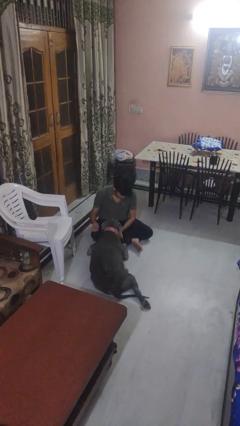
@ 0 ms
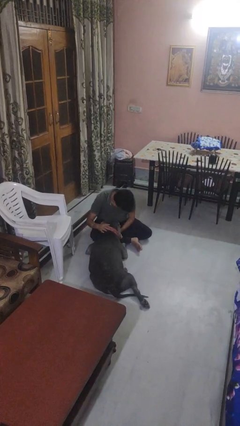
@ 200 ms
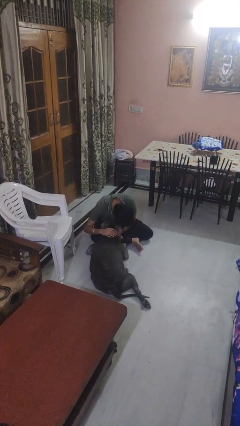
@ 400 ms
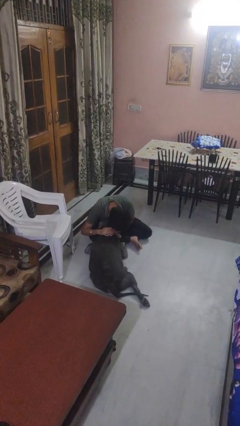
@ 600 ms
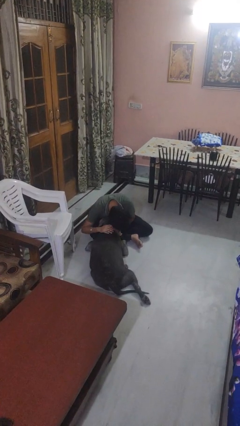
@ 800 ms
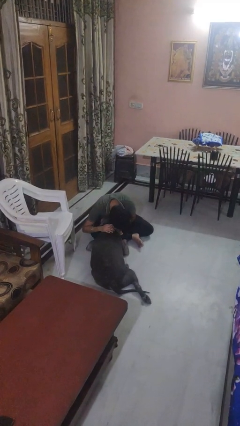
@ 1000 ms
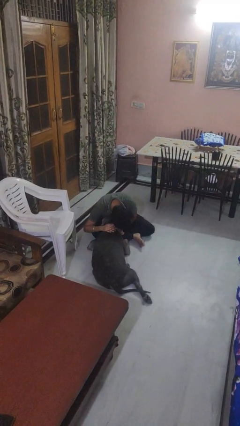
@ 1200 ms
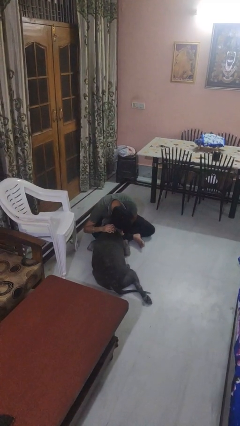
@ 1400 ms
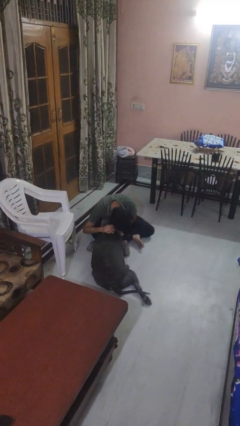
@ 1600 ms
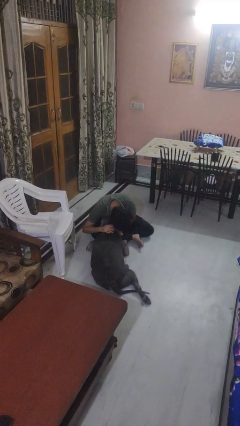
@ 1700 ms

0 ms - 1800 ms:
person hugs dog

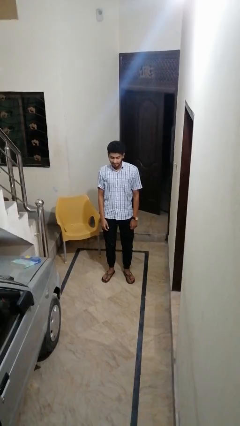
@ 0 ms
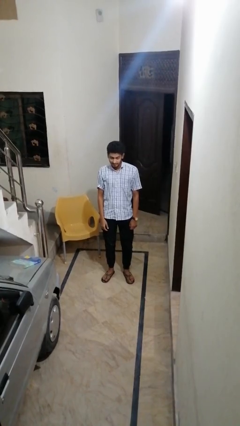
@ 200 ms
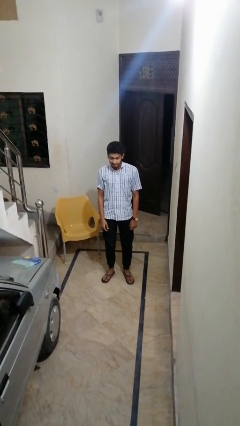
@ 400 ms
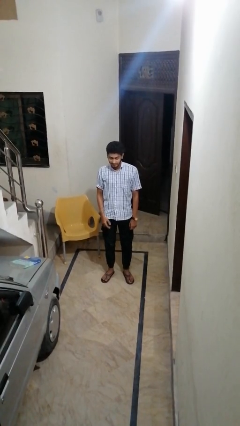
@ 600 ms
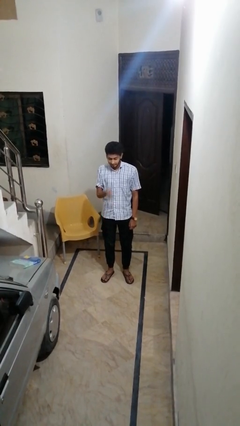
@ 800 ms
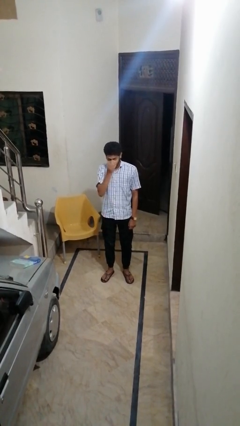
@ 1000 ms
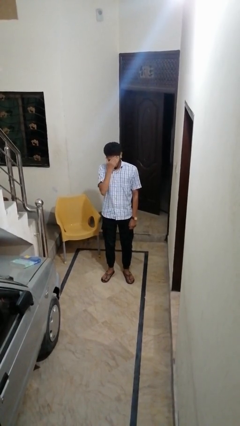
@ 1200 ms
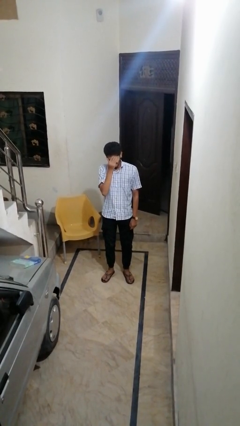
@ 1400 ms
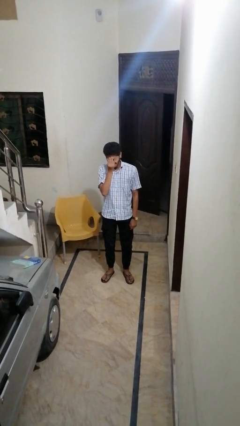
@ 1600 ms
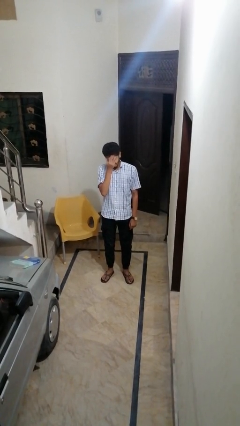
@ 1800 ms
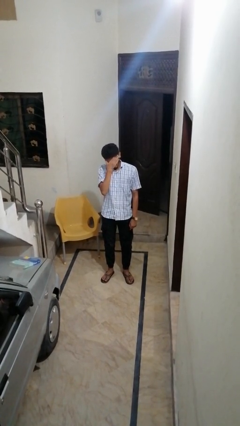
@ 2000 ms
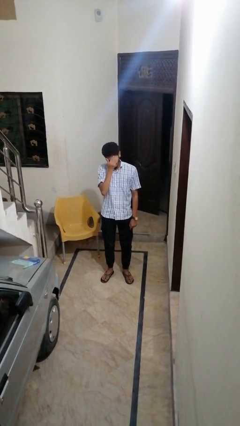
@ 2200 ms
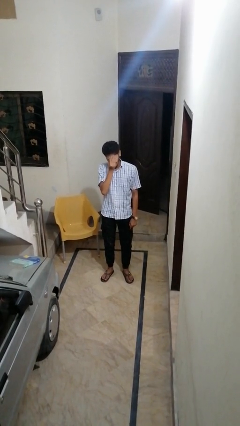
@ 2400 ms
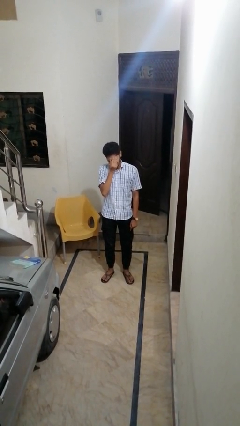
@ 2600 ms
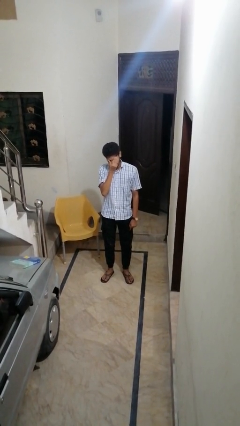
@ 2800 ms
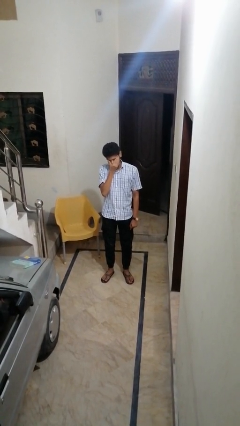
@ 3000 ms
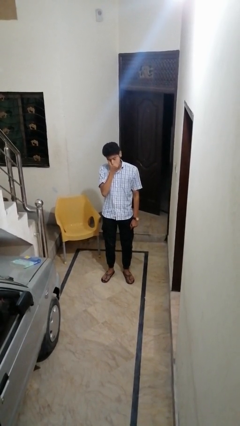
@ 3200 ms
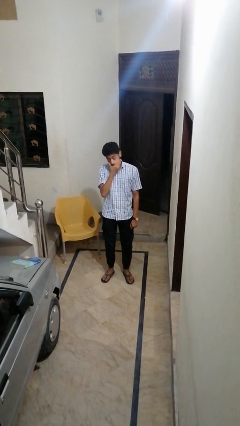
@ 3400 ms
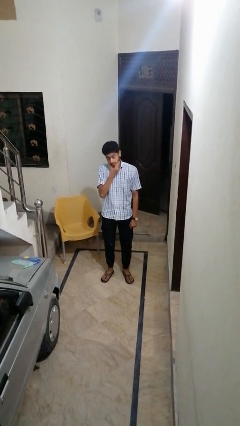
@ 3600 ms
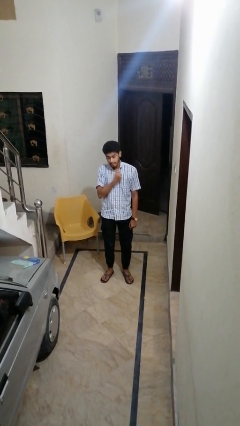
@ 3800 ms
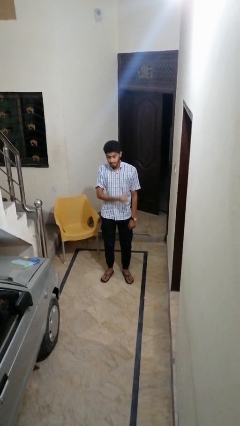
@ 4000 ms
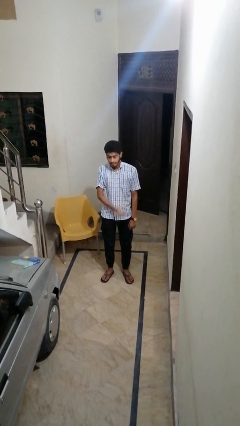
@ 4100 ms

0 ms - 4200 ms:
person scratches face

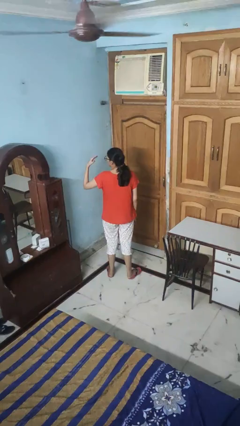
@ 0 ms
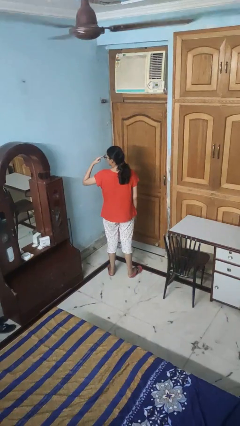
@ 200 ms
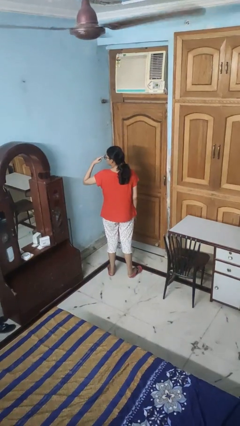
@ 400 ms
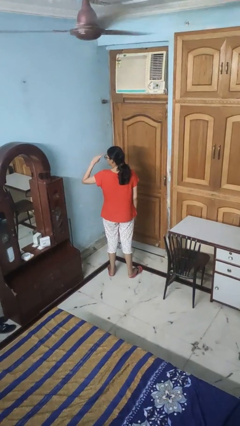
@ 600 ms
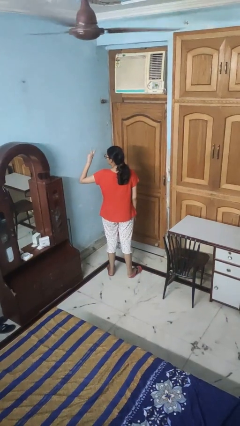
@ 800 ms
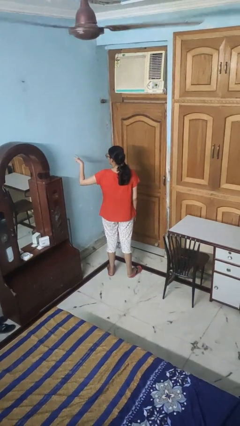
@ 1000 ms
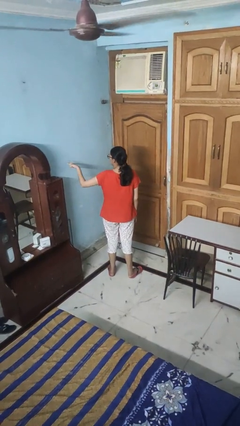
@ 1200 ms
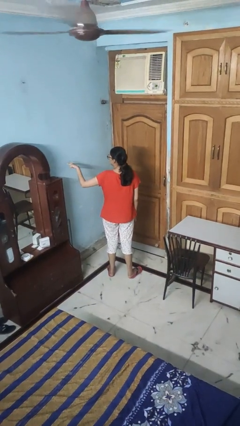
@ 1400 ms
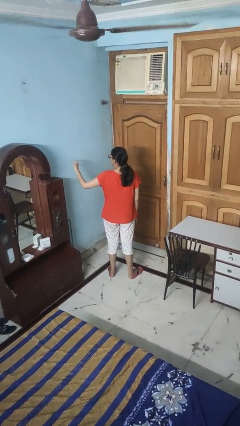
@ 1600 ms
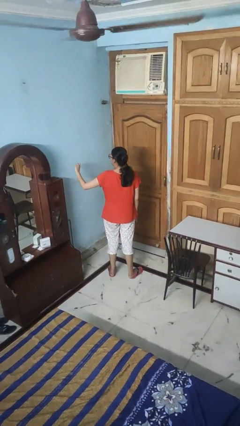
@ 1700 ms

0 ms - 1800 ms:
person gestures watch closely

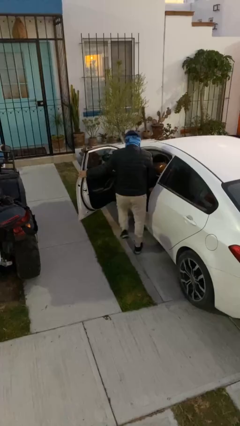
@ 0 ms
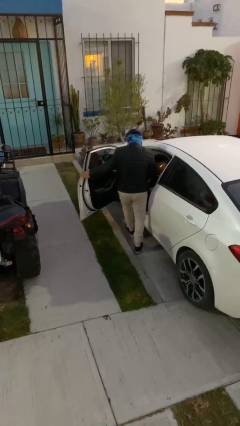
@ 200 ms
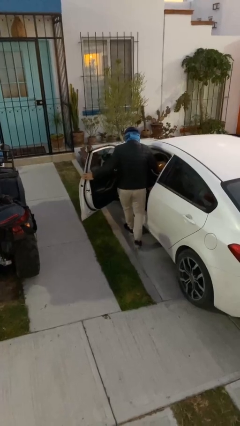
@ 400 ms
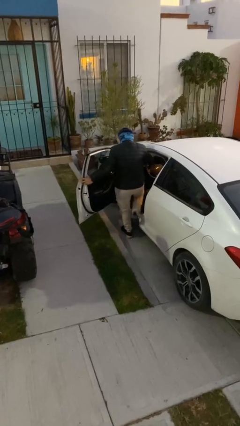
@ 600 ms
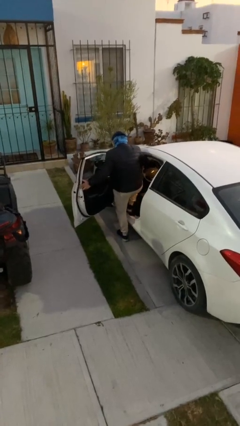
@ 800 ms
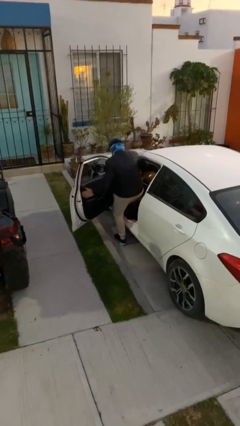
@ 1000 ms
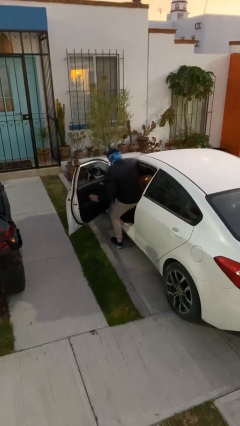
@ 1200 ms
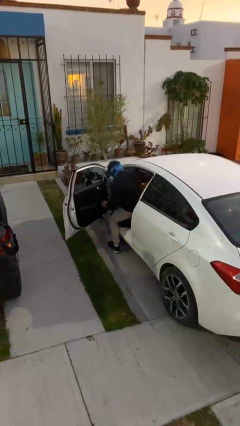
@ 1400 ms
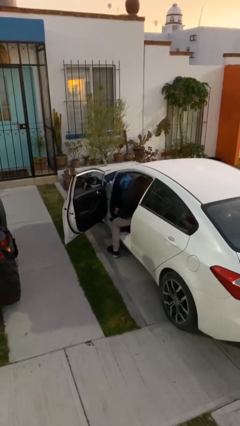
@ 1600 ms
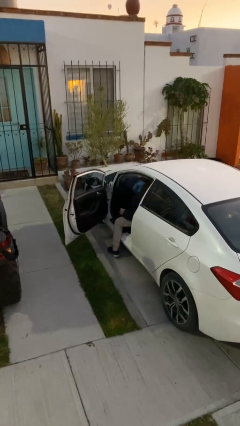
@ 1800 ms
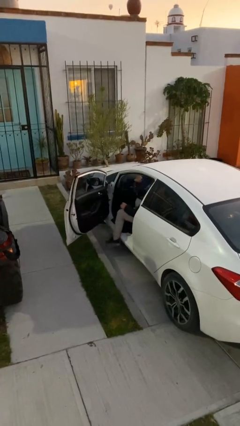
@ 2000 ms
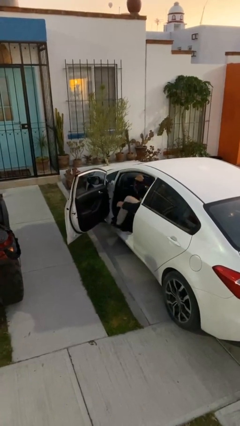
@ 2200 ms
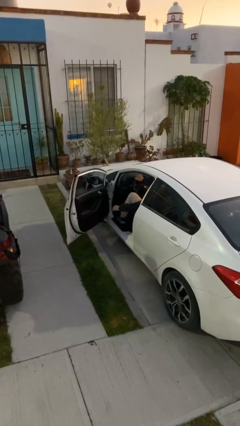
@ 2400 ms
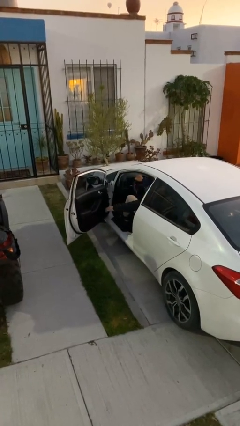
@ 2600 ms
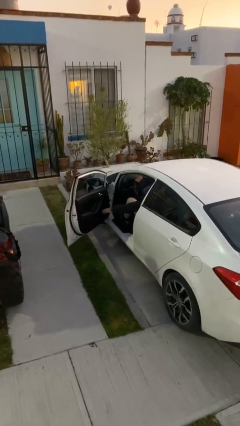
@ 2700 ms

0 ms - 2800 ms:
person enters car

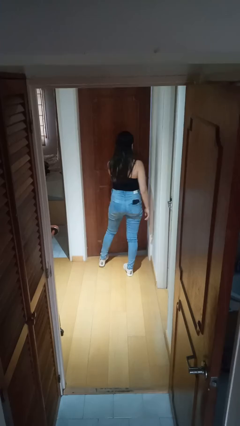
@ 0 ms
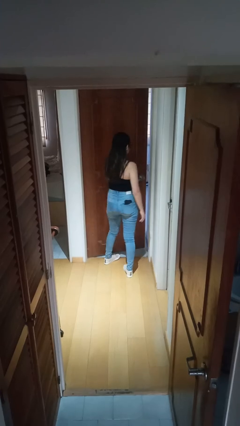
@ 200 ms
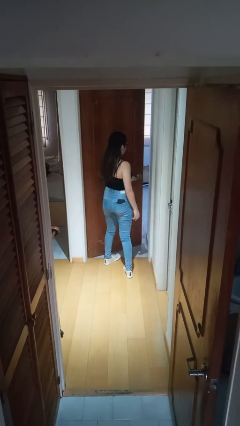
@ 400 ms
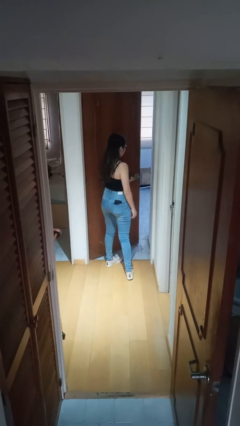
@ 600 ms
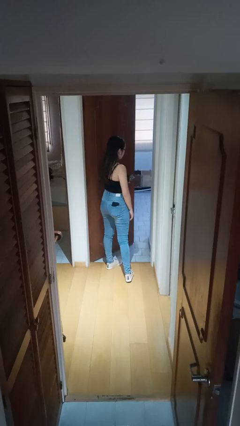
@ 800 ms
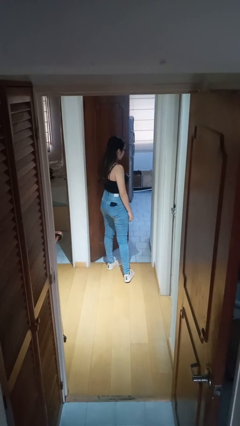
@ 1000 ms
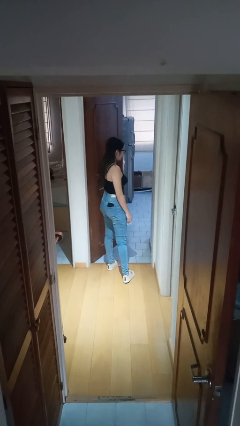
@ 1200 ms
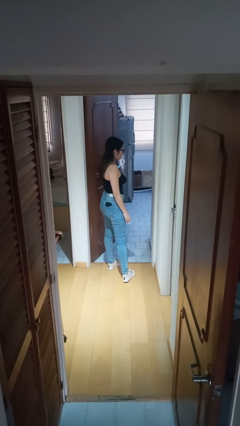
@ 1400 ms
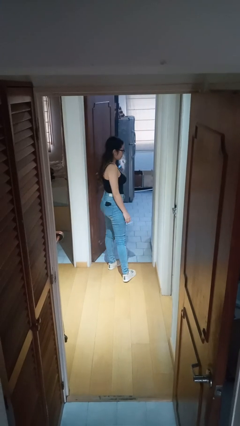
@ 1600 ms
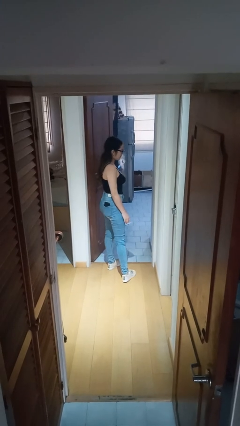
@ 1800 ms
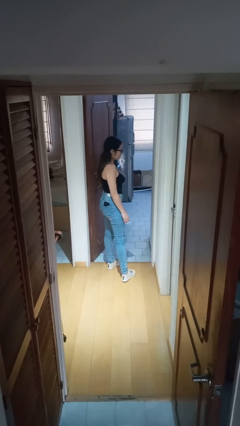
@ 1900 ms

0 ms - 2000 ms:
person opens facility door

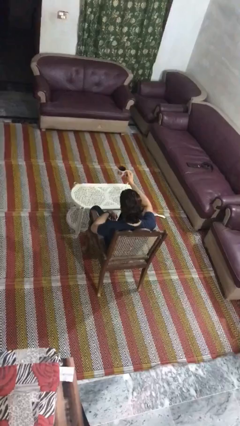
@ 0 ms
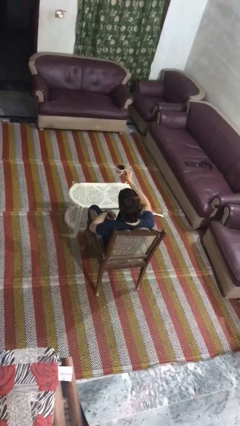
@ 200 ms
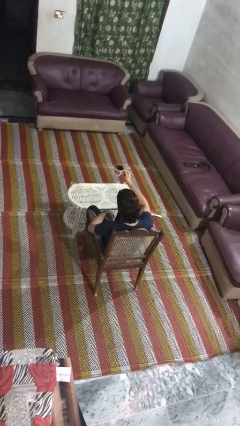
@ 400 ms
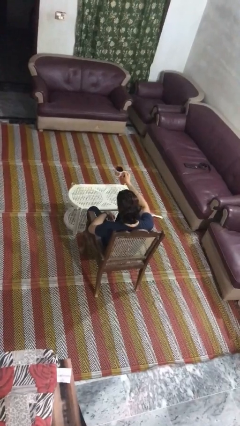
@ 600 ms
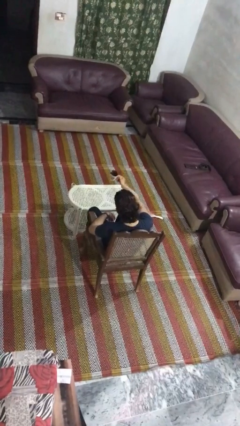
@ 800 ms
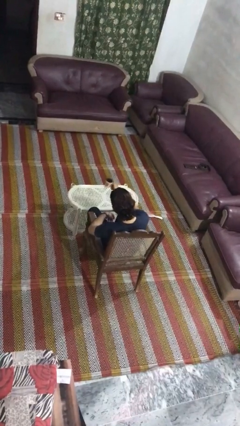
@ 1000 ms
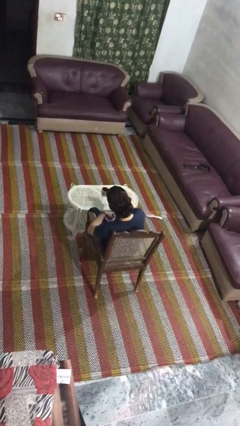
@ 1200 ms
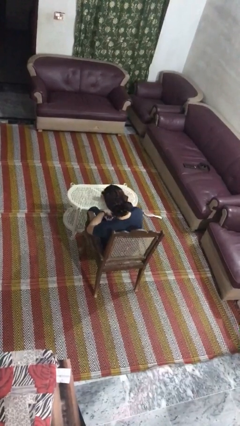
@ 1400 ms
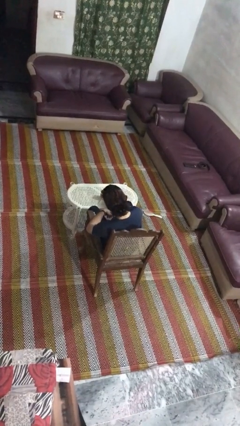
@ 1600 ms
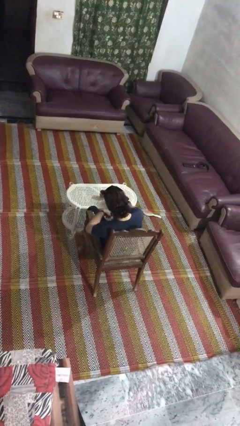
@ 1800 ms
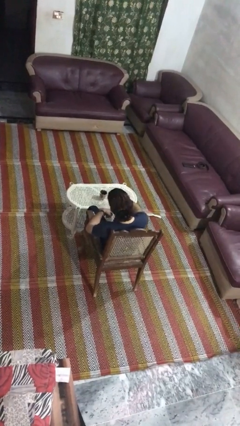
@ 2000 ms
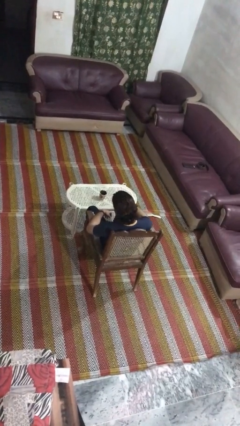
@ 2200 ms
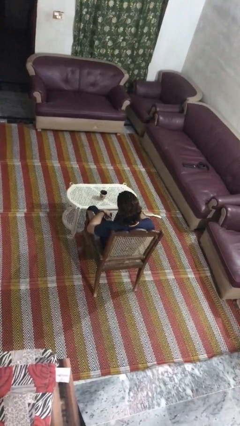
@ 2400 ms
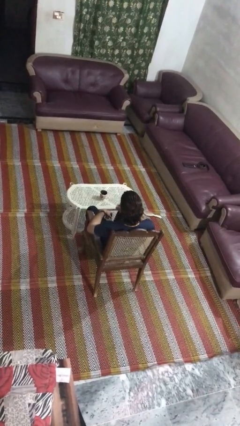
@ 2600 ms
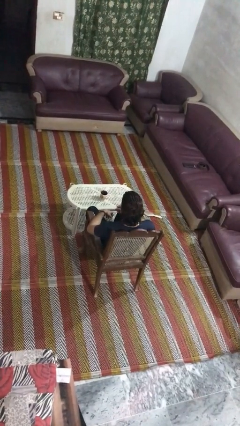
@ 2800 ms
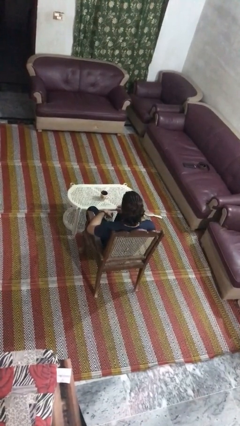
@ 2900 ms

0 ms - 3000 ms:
person puts down object on table

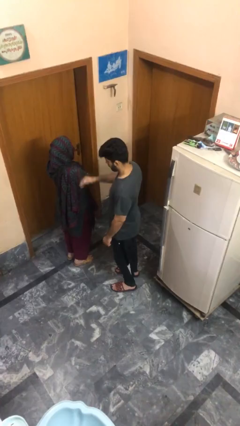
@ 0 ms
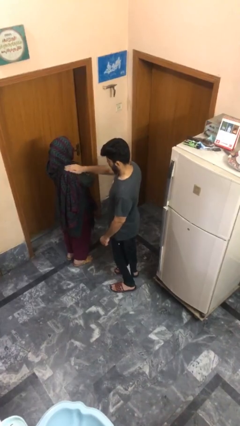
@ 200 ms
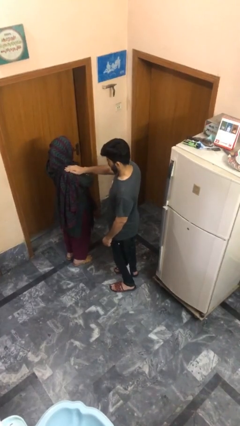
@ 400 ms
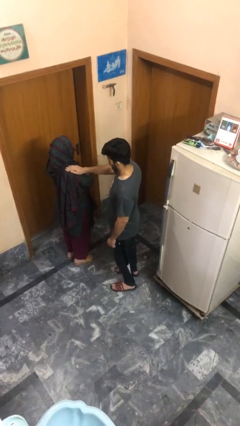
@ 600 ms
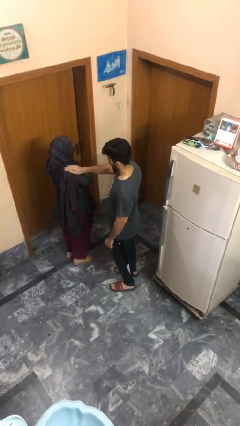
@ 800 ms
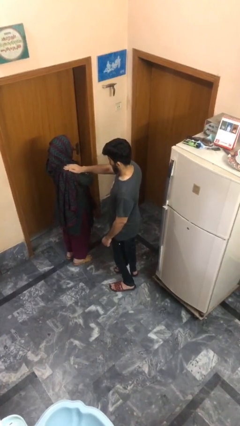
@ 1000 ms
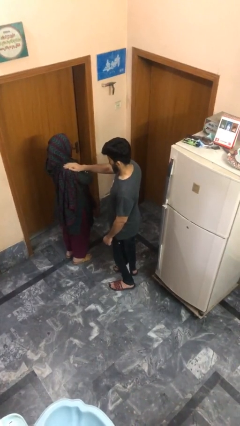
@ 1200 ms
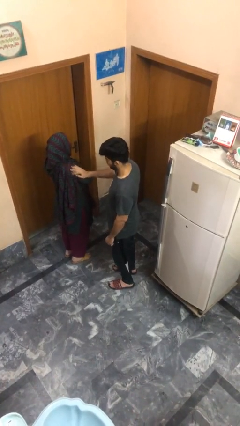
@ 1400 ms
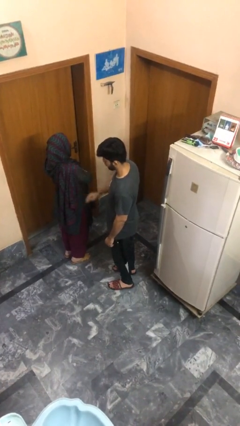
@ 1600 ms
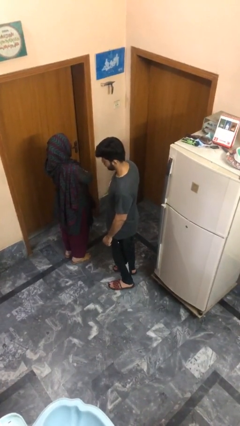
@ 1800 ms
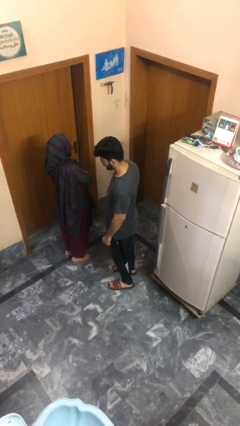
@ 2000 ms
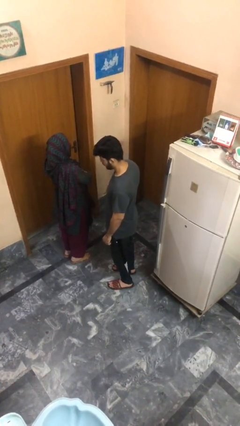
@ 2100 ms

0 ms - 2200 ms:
person pounds shoulders of person
